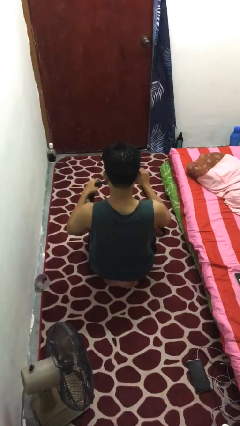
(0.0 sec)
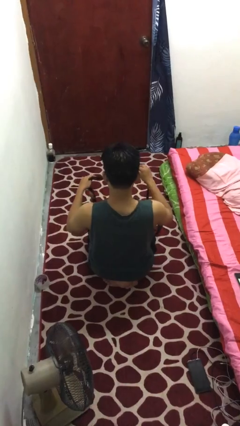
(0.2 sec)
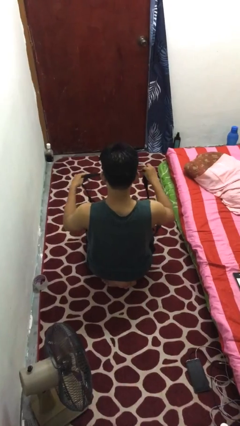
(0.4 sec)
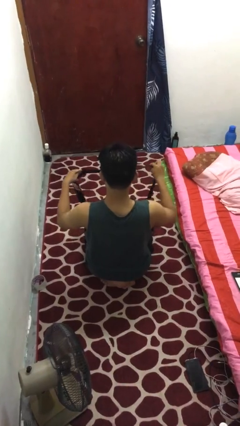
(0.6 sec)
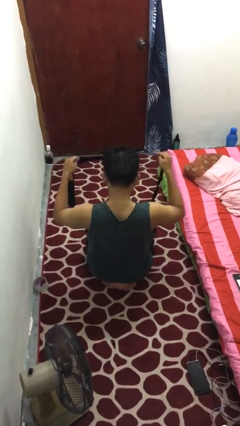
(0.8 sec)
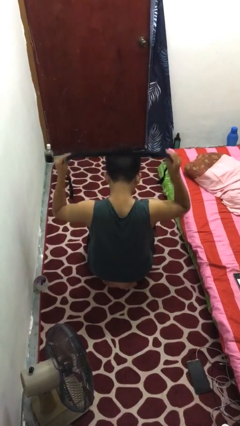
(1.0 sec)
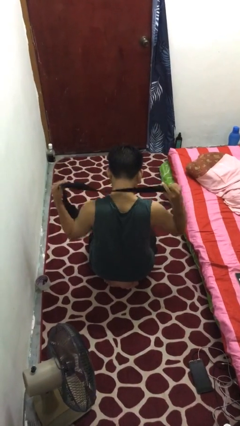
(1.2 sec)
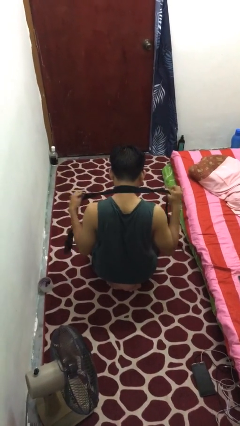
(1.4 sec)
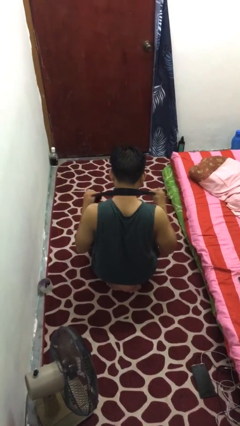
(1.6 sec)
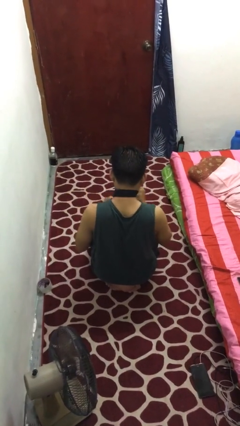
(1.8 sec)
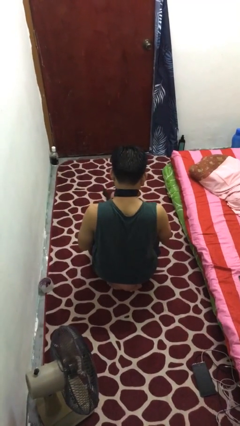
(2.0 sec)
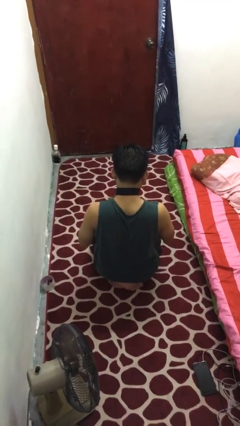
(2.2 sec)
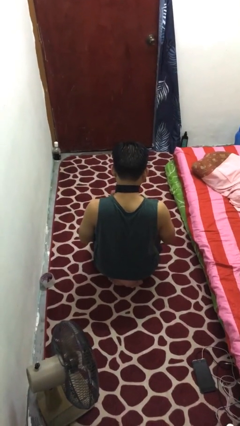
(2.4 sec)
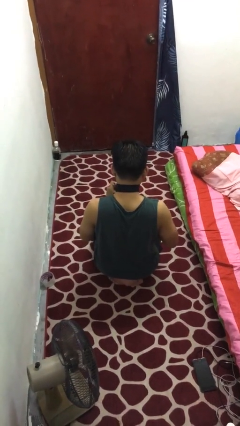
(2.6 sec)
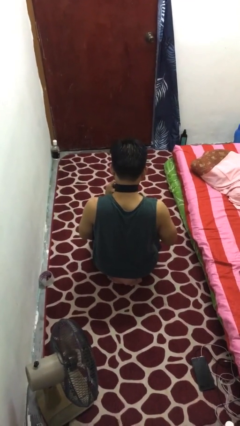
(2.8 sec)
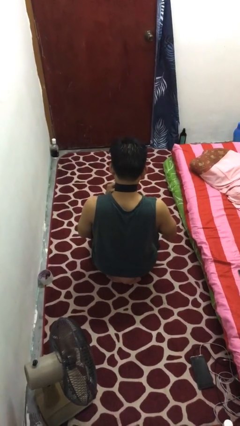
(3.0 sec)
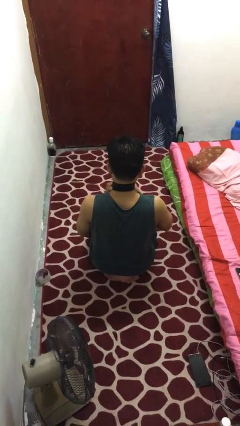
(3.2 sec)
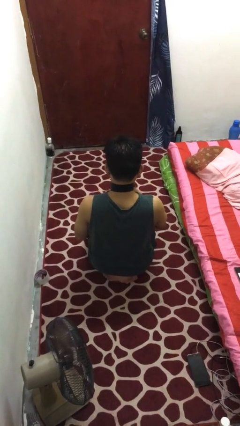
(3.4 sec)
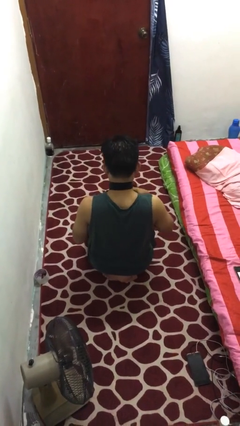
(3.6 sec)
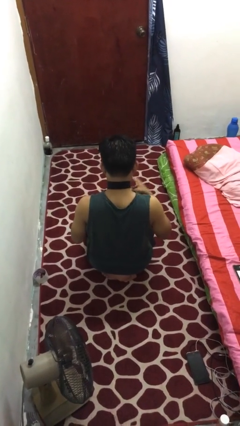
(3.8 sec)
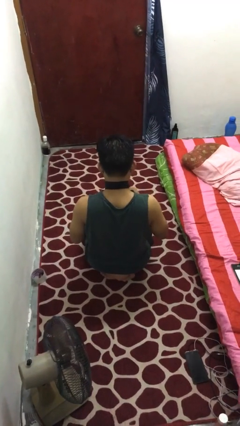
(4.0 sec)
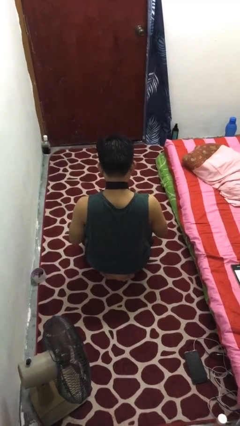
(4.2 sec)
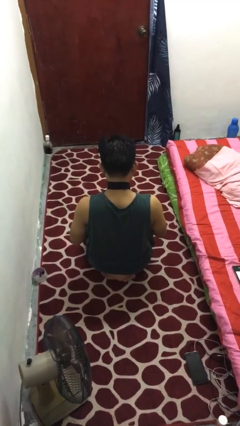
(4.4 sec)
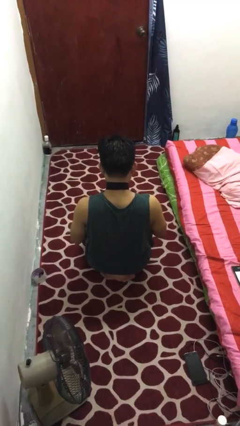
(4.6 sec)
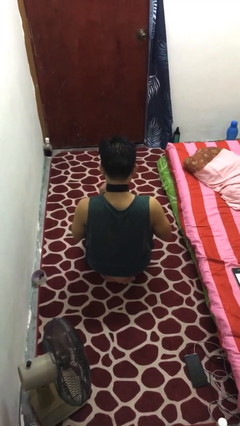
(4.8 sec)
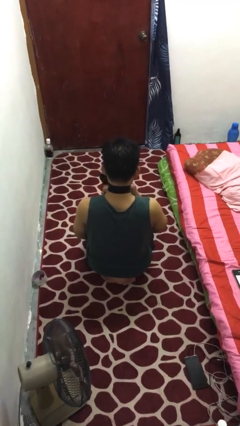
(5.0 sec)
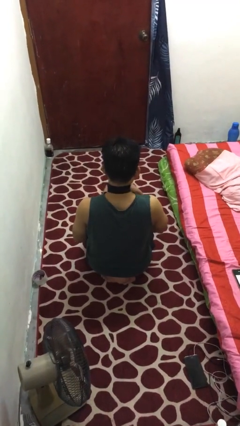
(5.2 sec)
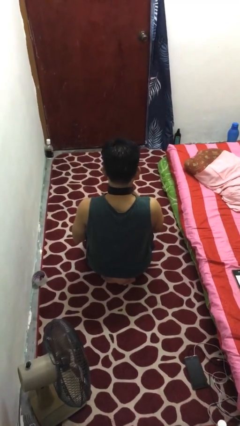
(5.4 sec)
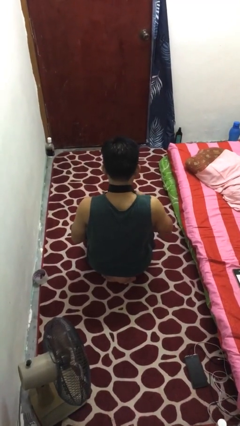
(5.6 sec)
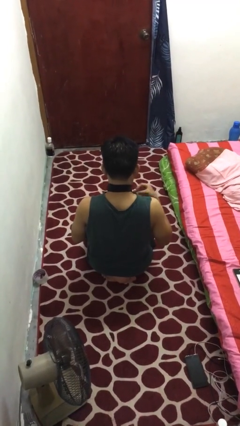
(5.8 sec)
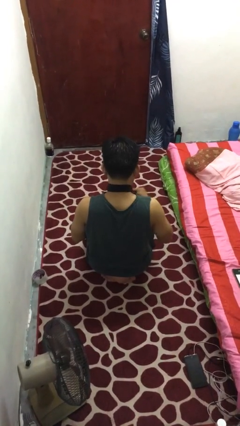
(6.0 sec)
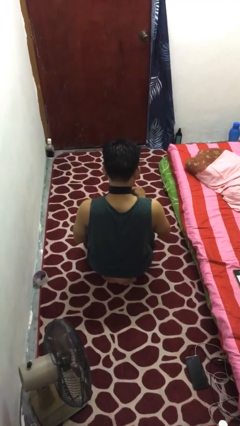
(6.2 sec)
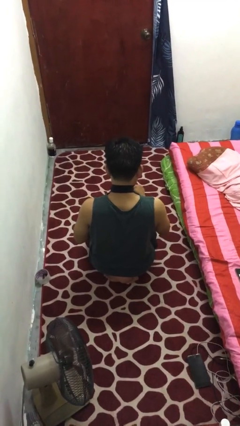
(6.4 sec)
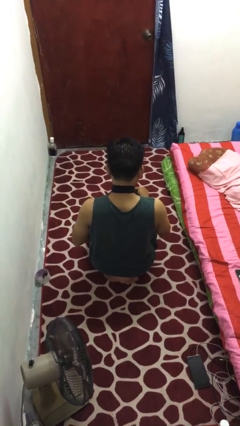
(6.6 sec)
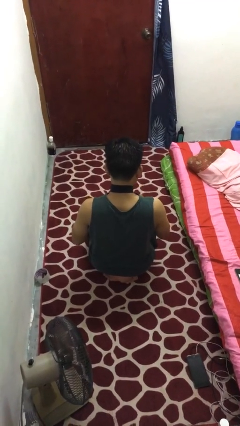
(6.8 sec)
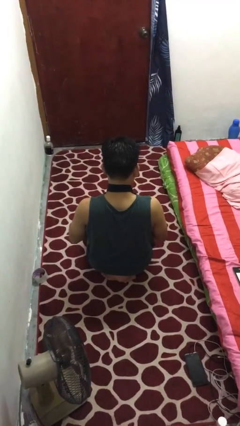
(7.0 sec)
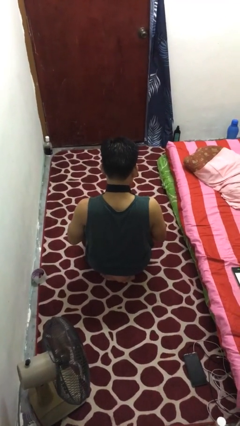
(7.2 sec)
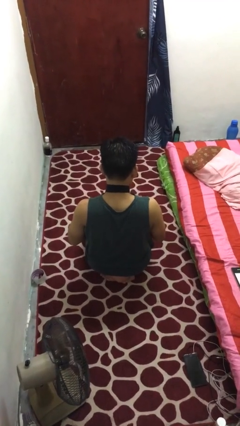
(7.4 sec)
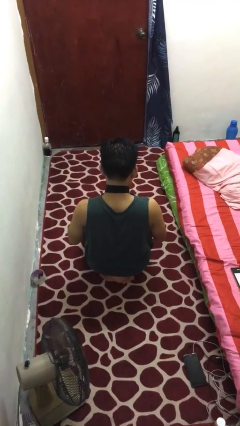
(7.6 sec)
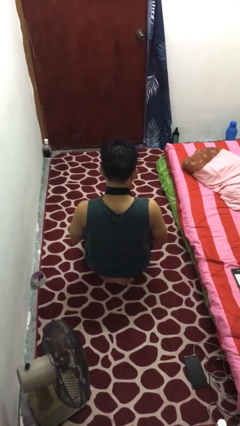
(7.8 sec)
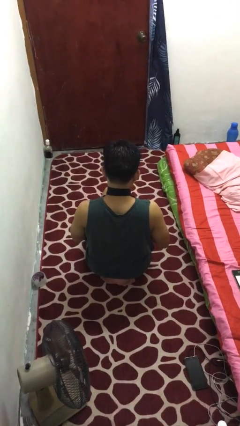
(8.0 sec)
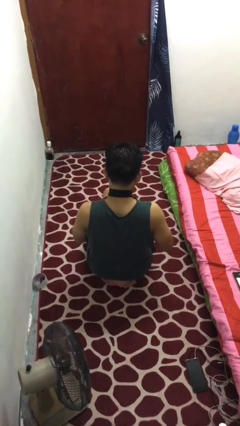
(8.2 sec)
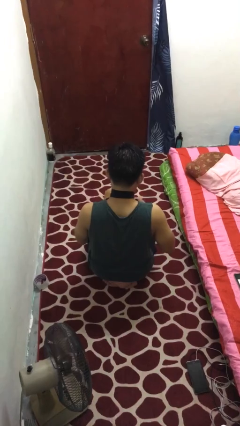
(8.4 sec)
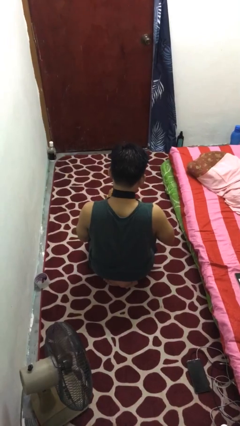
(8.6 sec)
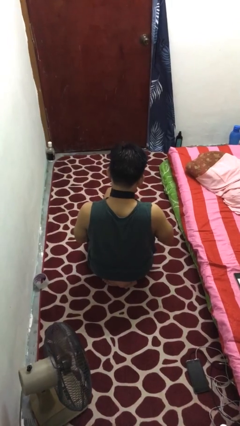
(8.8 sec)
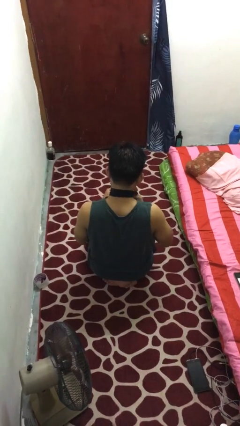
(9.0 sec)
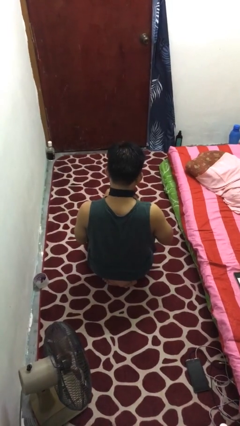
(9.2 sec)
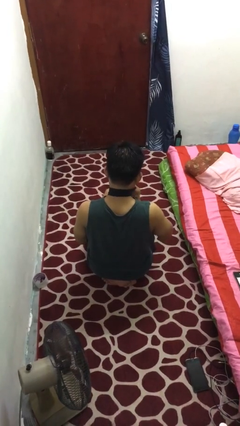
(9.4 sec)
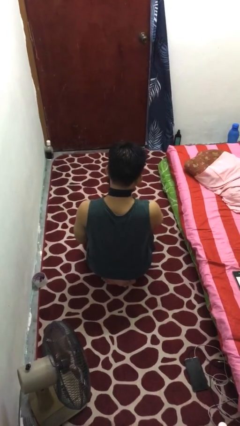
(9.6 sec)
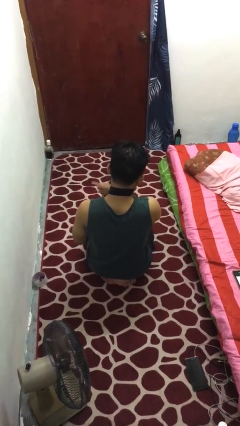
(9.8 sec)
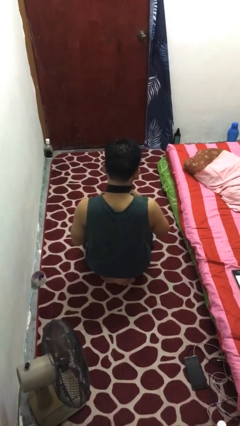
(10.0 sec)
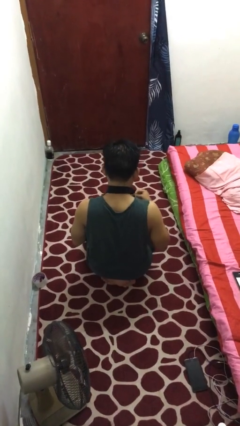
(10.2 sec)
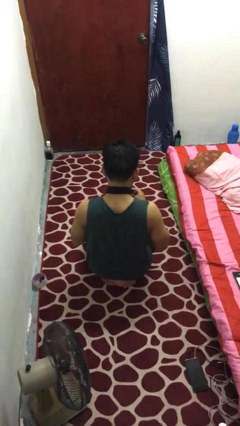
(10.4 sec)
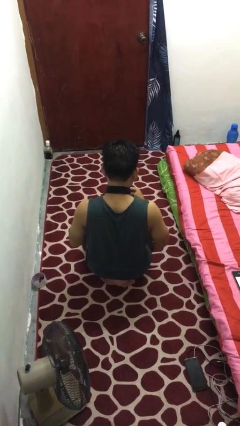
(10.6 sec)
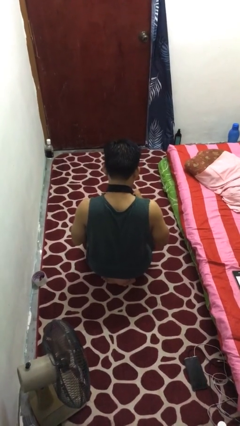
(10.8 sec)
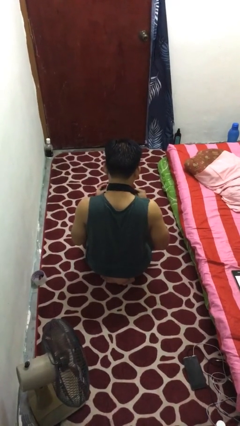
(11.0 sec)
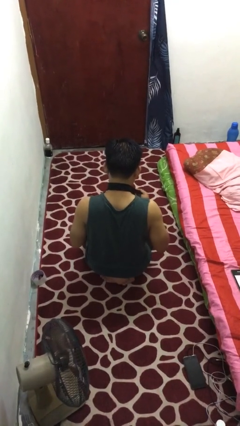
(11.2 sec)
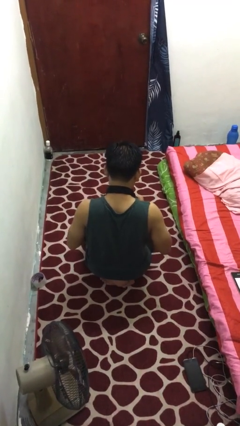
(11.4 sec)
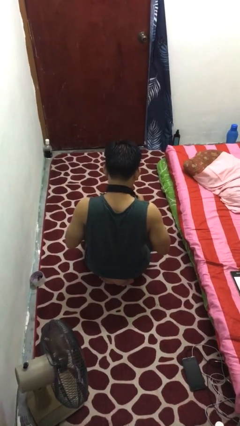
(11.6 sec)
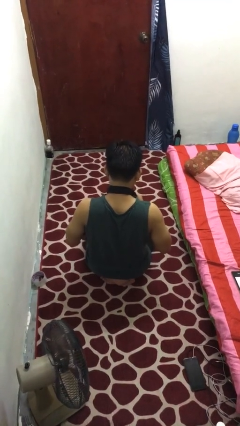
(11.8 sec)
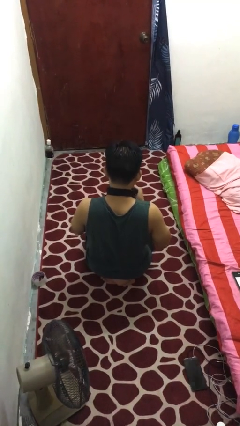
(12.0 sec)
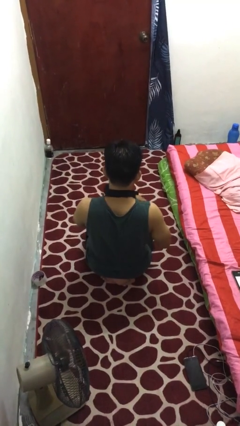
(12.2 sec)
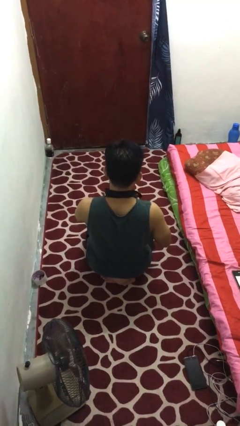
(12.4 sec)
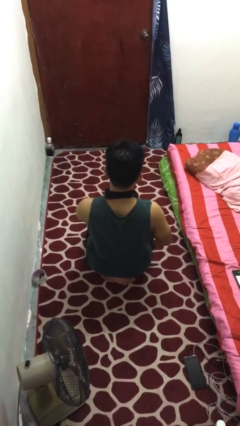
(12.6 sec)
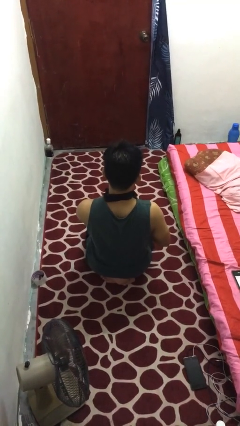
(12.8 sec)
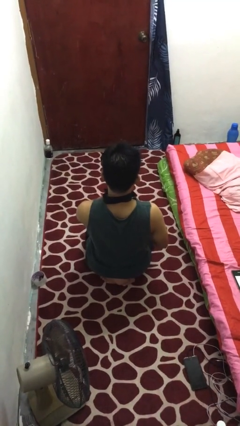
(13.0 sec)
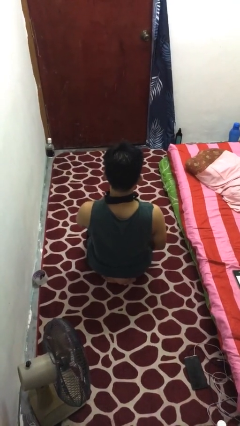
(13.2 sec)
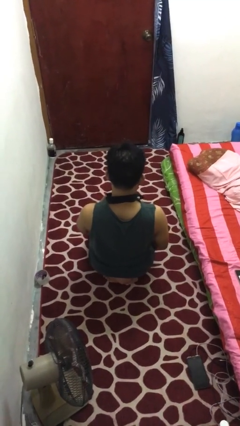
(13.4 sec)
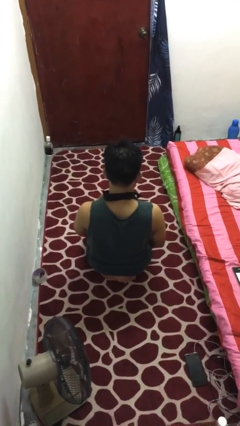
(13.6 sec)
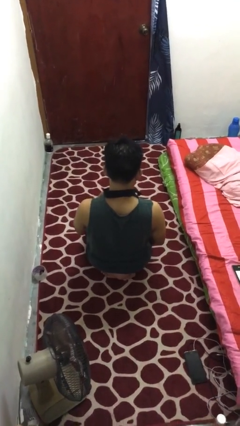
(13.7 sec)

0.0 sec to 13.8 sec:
person puts on necktie

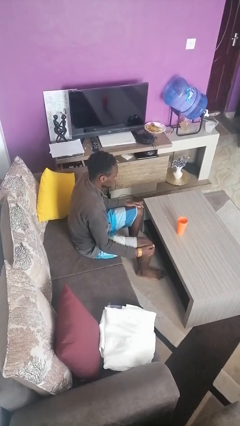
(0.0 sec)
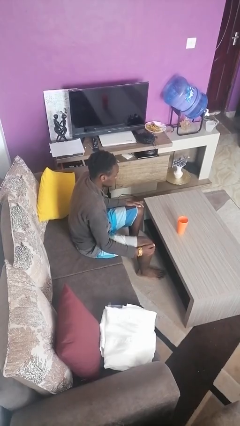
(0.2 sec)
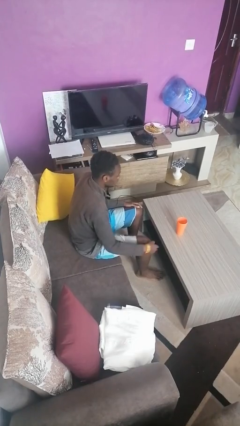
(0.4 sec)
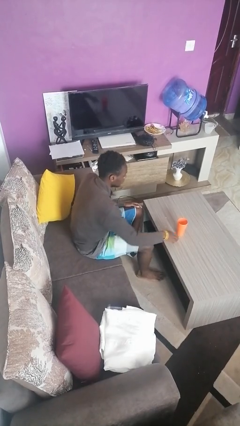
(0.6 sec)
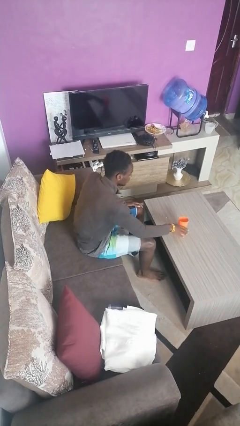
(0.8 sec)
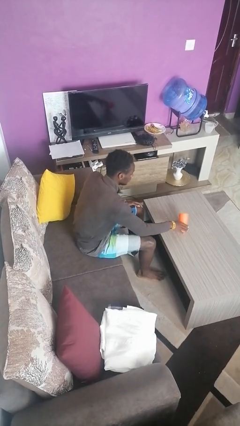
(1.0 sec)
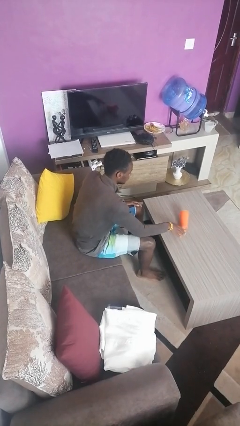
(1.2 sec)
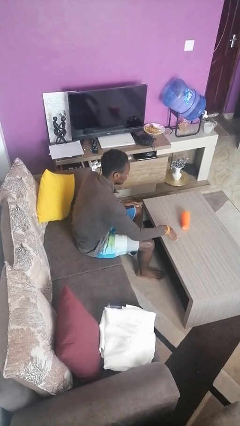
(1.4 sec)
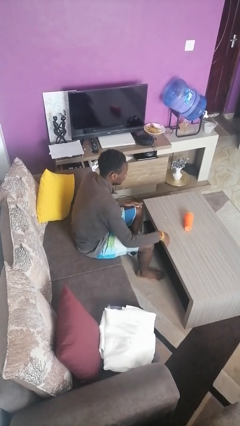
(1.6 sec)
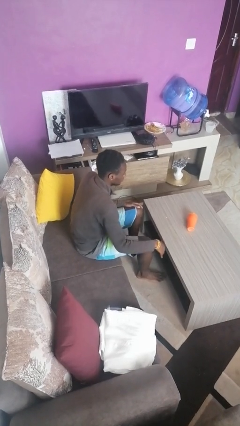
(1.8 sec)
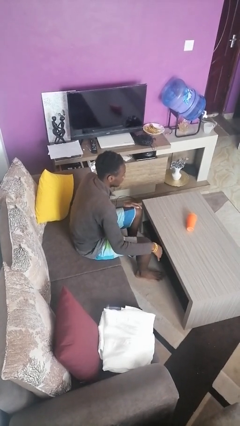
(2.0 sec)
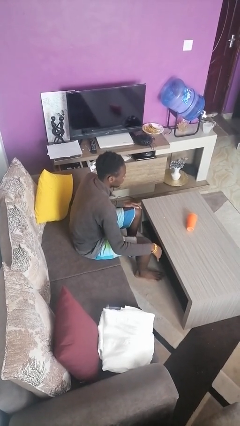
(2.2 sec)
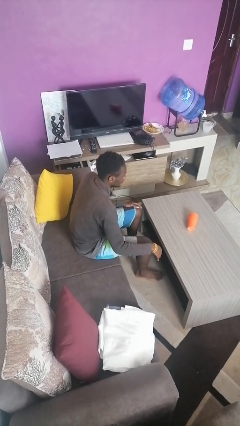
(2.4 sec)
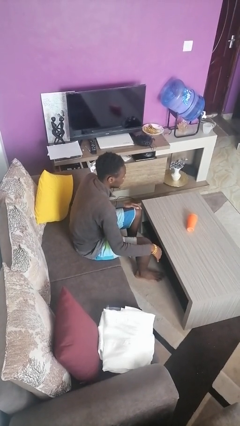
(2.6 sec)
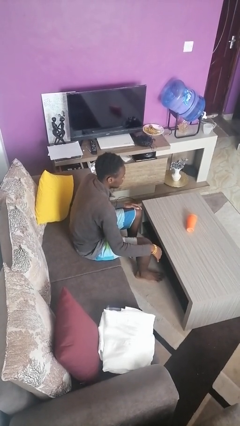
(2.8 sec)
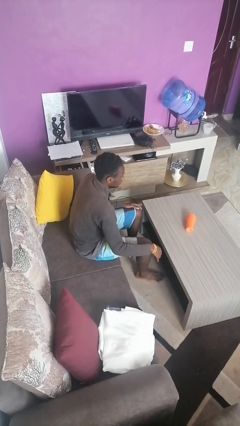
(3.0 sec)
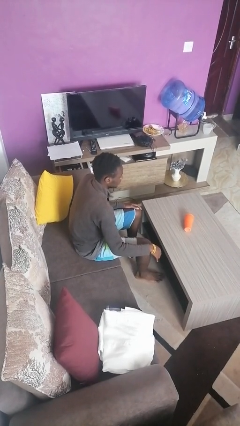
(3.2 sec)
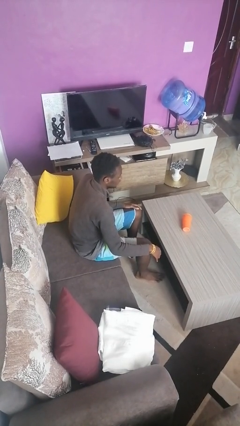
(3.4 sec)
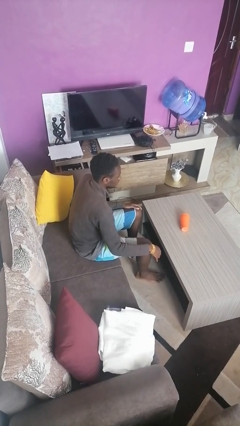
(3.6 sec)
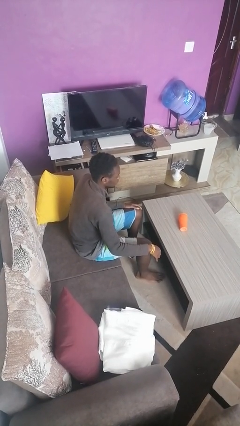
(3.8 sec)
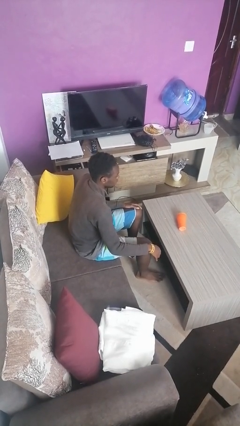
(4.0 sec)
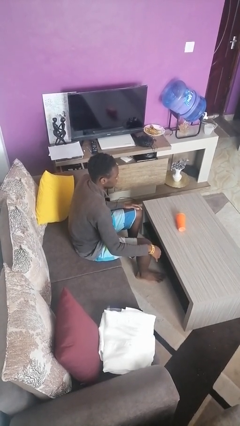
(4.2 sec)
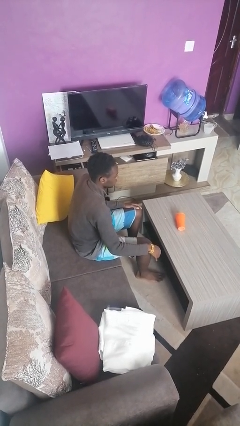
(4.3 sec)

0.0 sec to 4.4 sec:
person knocks over glass
